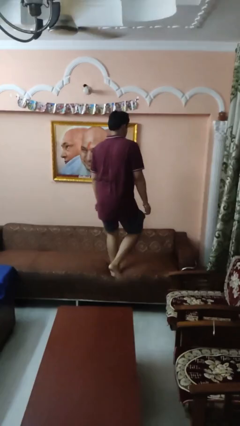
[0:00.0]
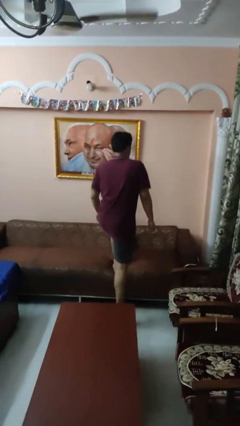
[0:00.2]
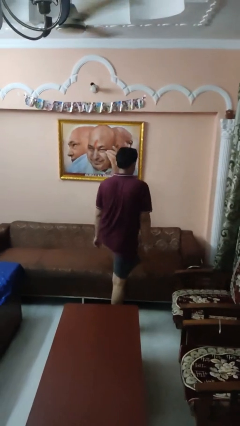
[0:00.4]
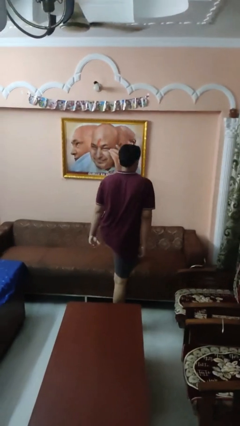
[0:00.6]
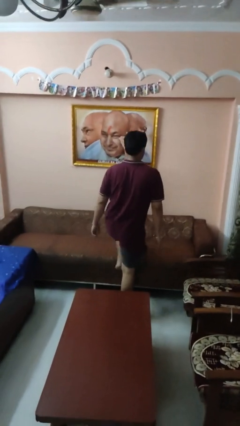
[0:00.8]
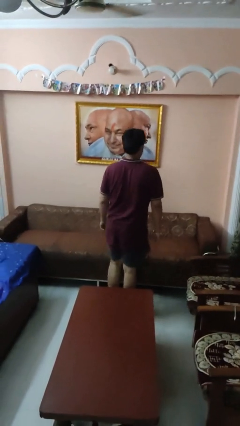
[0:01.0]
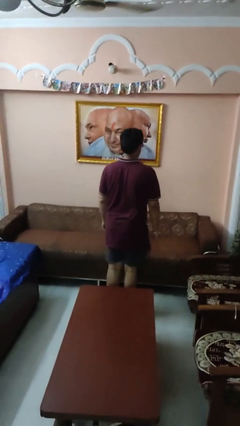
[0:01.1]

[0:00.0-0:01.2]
person climbs off couch

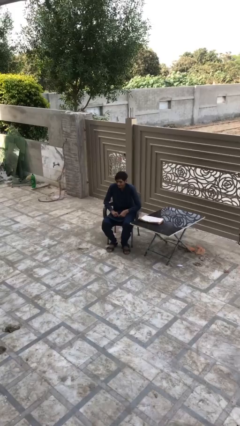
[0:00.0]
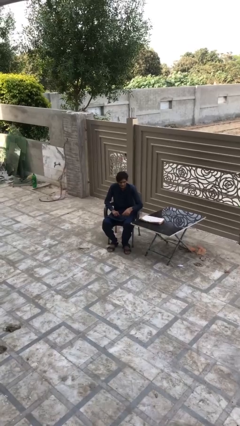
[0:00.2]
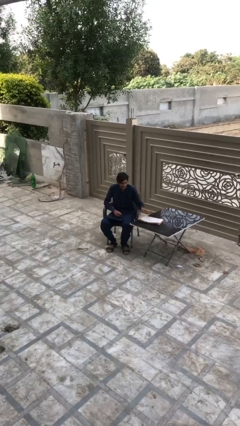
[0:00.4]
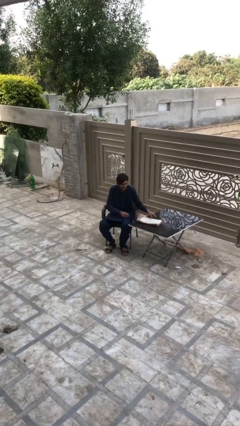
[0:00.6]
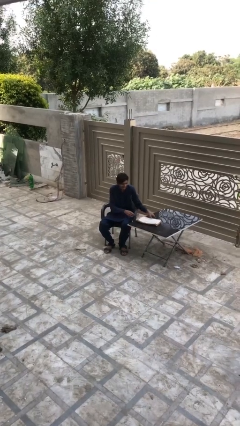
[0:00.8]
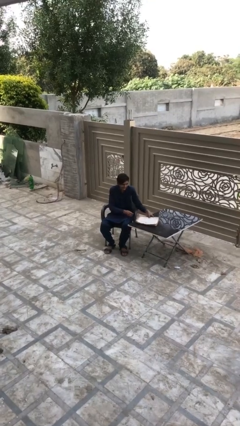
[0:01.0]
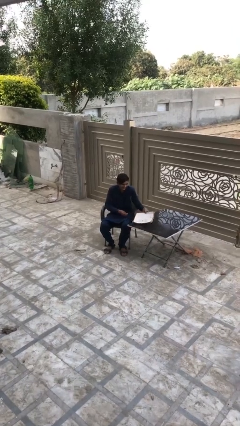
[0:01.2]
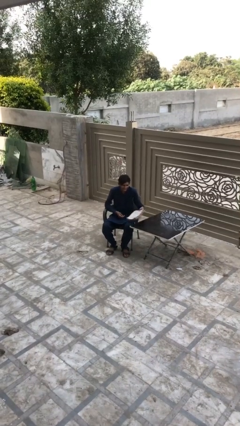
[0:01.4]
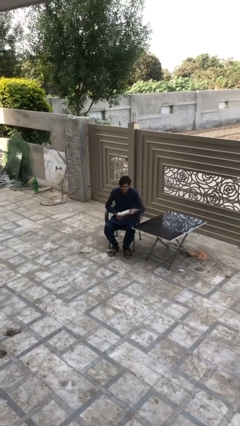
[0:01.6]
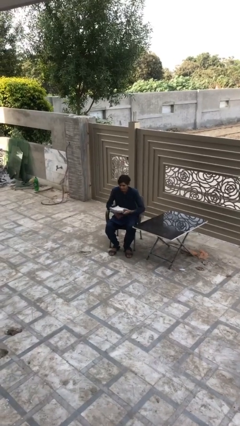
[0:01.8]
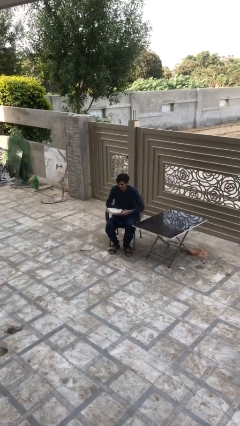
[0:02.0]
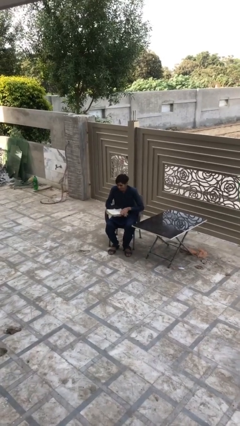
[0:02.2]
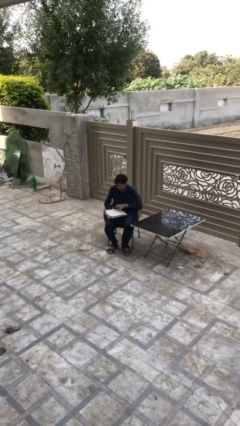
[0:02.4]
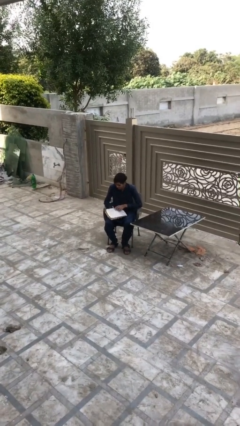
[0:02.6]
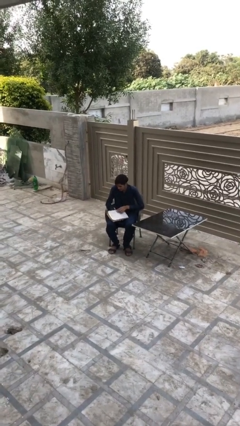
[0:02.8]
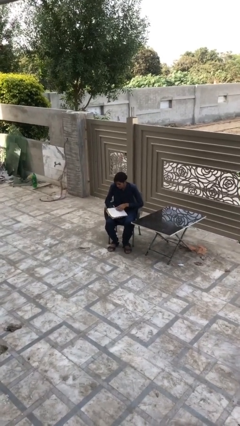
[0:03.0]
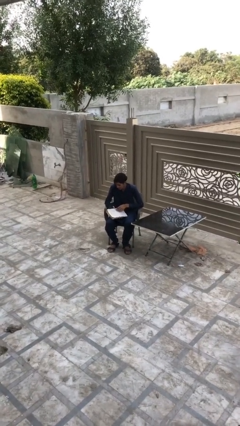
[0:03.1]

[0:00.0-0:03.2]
person picks up object from table

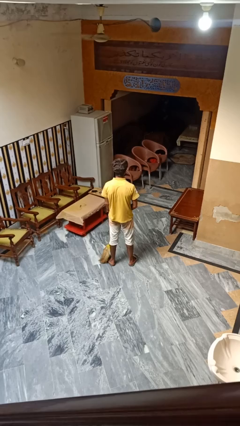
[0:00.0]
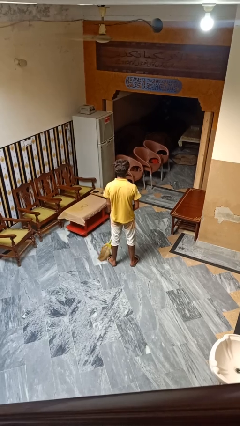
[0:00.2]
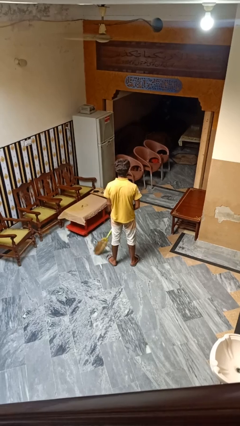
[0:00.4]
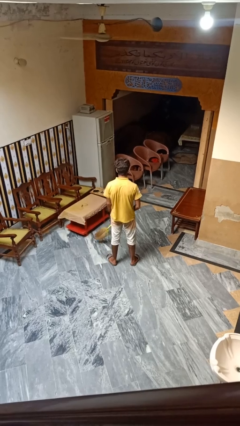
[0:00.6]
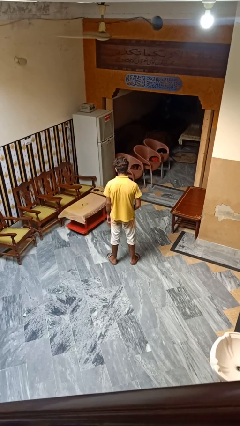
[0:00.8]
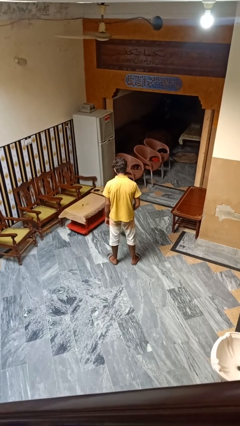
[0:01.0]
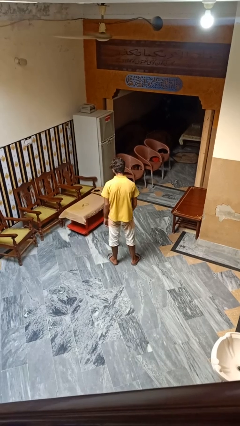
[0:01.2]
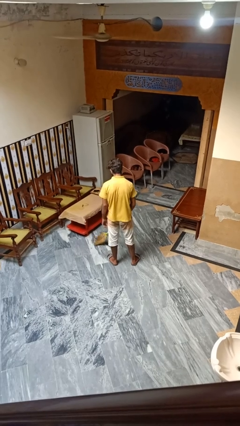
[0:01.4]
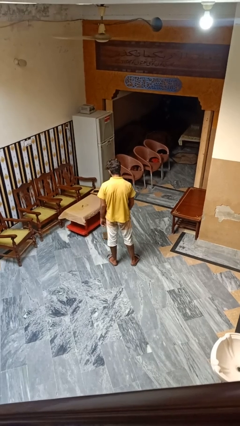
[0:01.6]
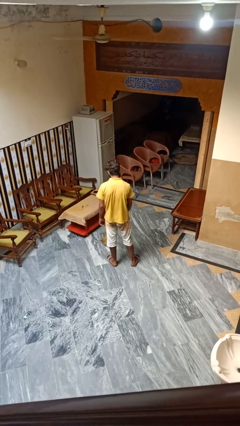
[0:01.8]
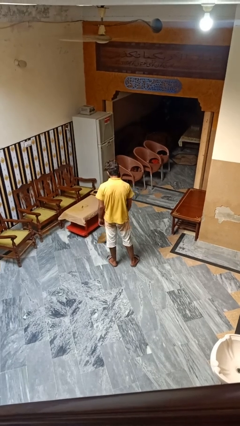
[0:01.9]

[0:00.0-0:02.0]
person mops

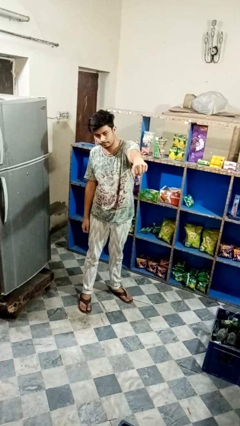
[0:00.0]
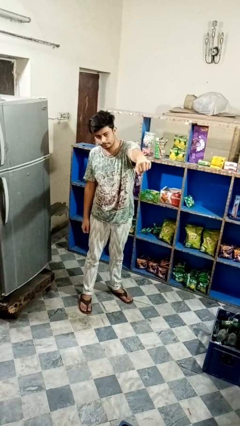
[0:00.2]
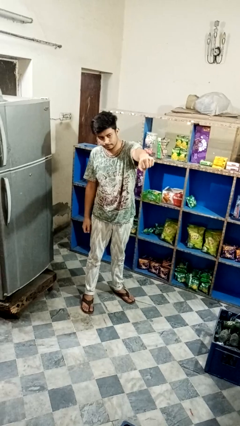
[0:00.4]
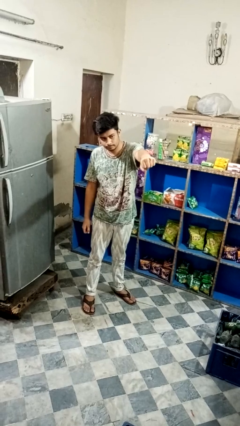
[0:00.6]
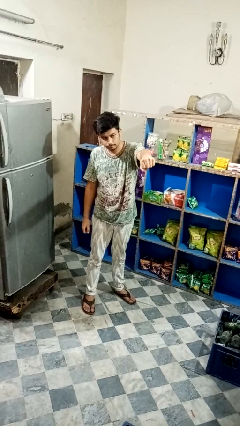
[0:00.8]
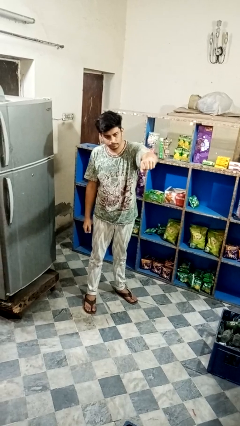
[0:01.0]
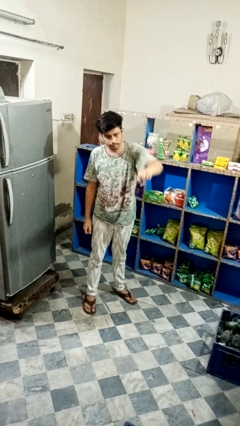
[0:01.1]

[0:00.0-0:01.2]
person punches

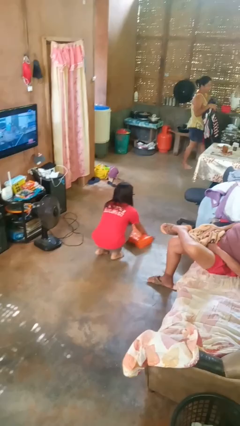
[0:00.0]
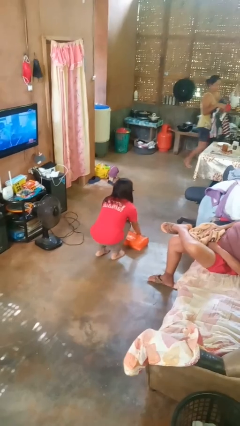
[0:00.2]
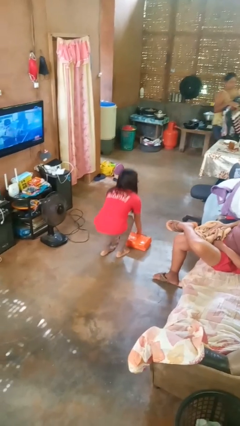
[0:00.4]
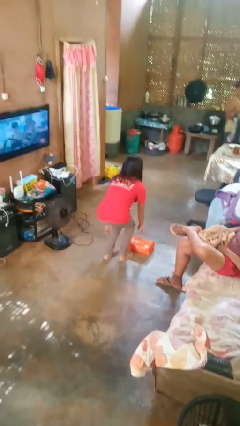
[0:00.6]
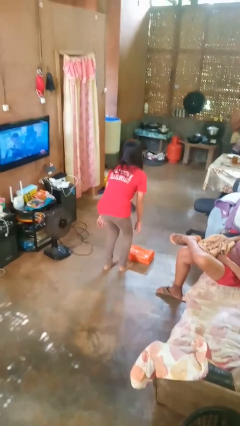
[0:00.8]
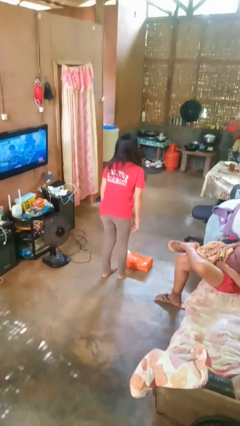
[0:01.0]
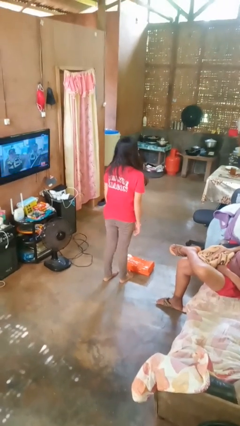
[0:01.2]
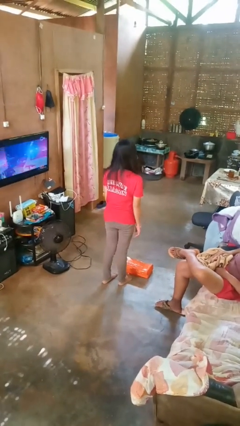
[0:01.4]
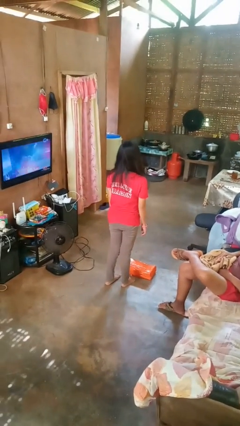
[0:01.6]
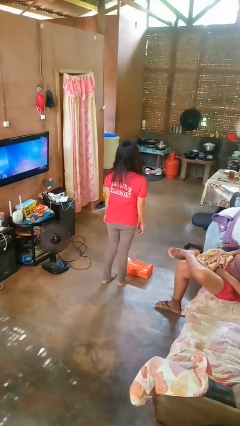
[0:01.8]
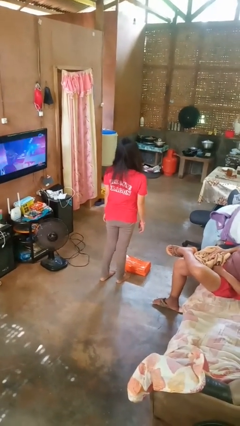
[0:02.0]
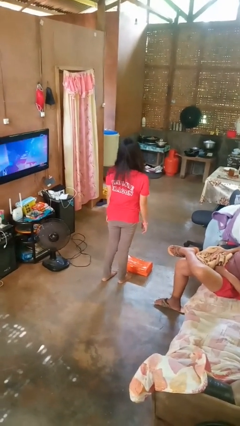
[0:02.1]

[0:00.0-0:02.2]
person stands up from floor

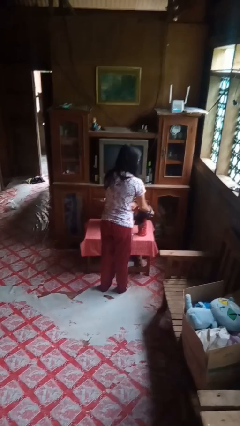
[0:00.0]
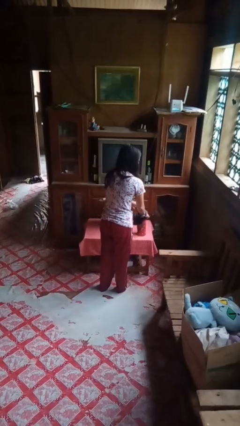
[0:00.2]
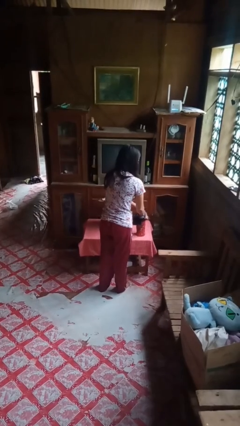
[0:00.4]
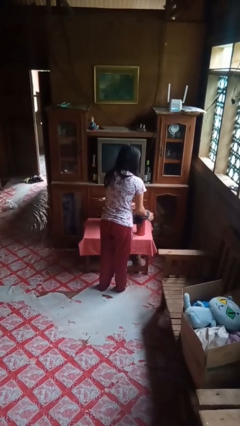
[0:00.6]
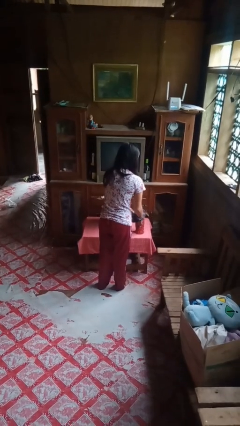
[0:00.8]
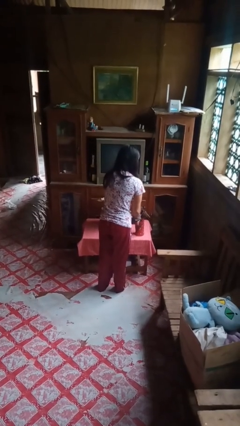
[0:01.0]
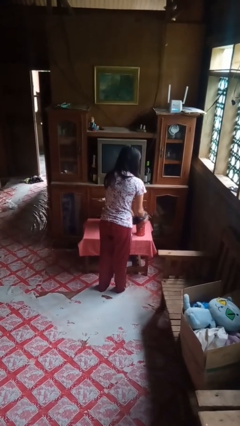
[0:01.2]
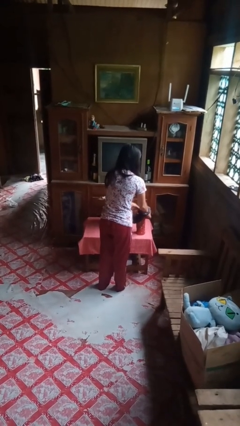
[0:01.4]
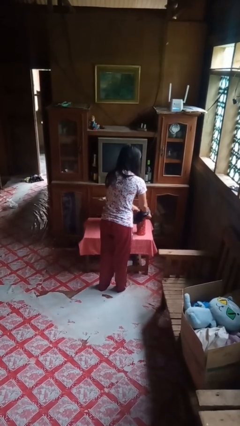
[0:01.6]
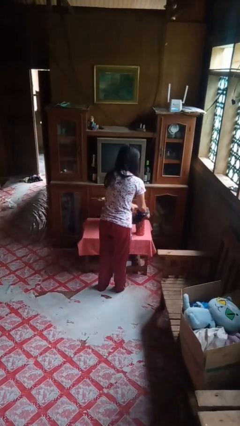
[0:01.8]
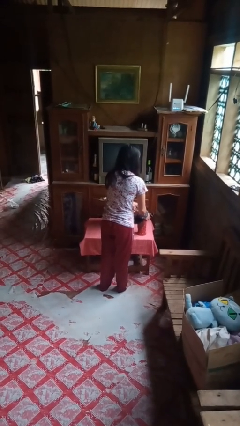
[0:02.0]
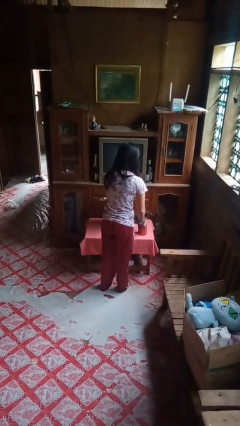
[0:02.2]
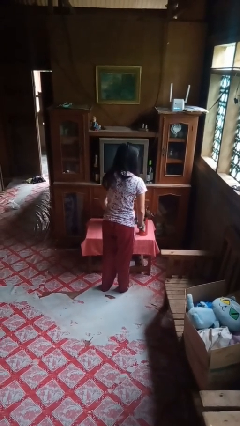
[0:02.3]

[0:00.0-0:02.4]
person arranges flowers in vase

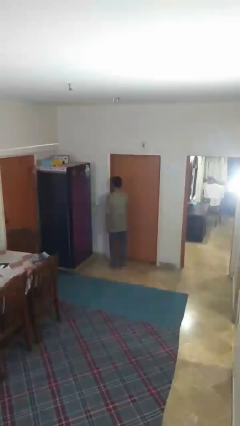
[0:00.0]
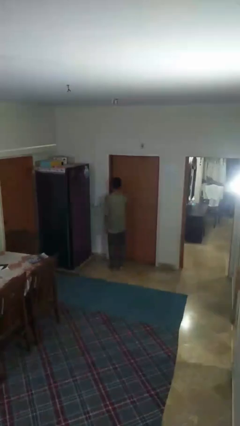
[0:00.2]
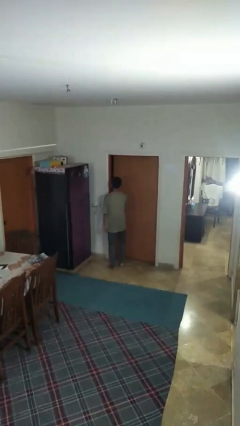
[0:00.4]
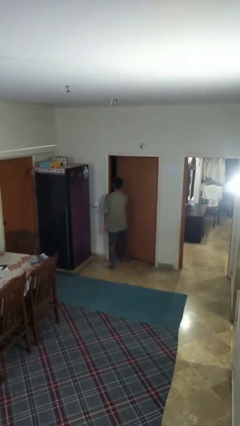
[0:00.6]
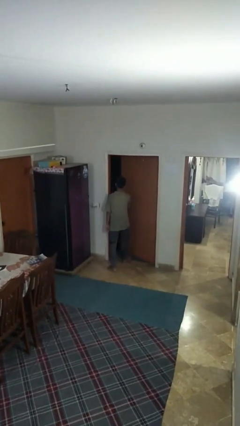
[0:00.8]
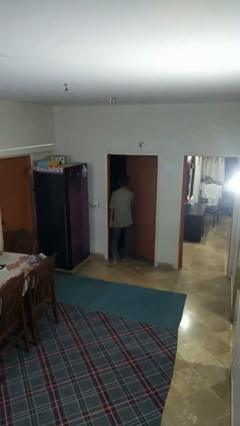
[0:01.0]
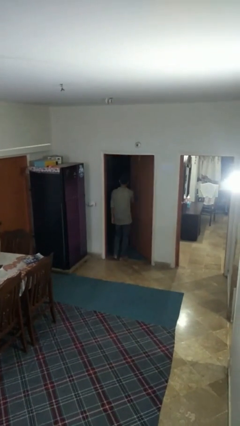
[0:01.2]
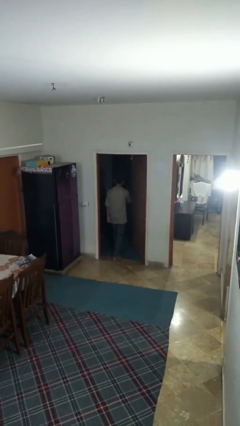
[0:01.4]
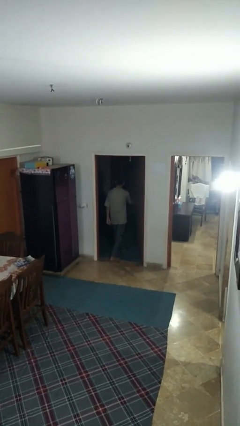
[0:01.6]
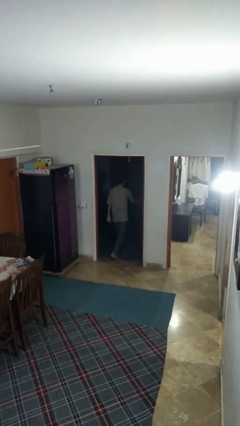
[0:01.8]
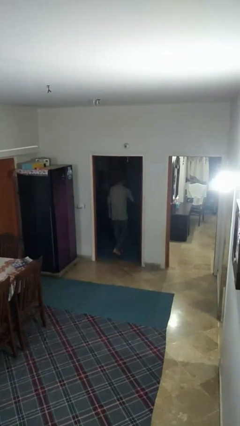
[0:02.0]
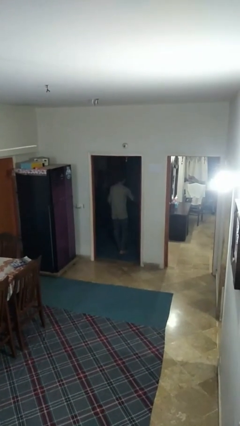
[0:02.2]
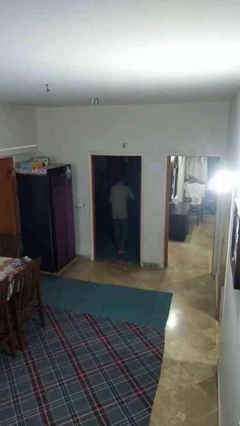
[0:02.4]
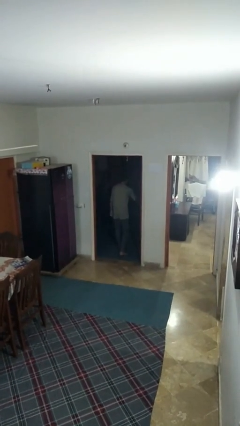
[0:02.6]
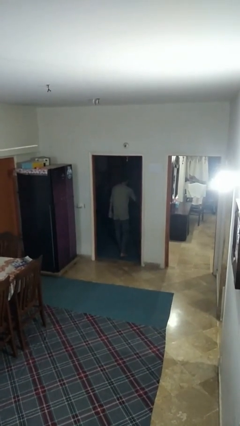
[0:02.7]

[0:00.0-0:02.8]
person opens facility door

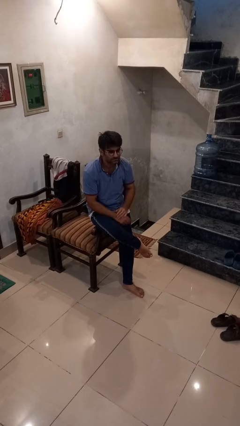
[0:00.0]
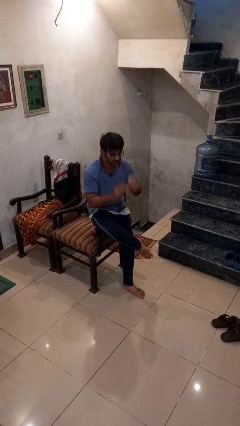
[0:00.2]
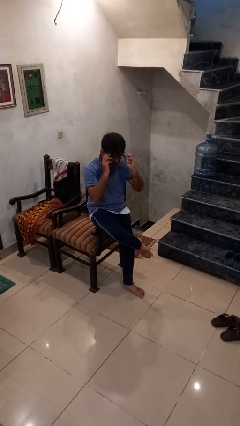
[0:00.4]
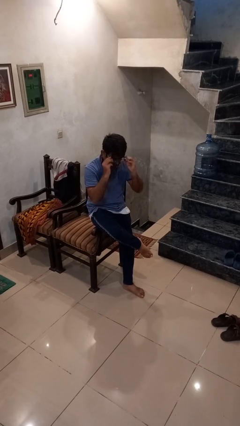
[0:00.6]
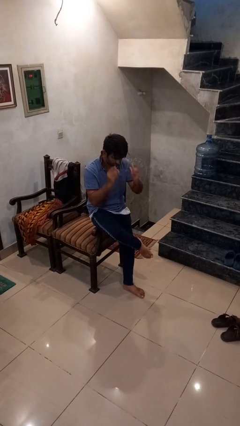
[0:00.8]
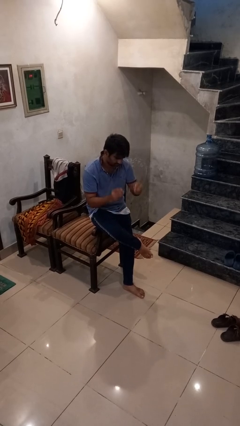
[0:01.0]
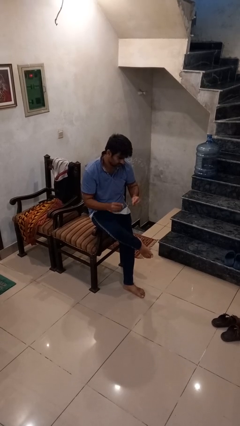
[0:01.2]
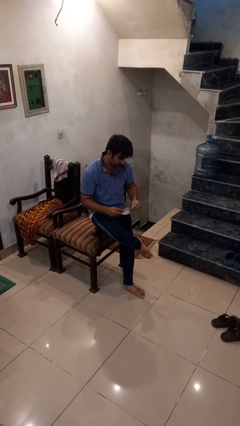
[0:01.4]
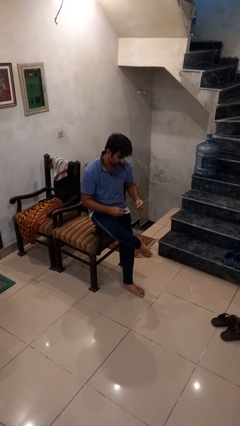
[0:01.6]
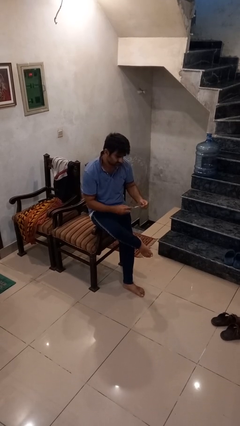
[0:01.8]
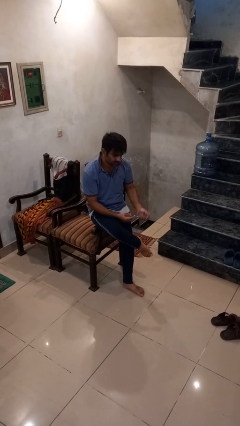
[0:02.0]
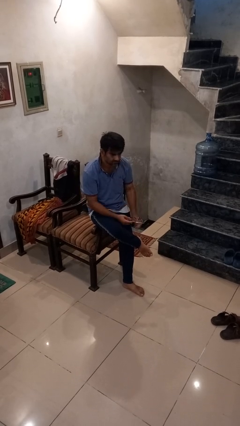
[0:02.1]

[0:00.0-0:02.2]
person takes off glasses
